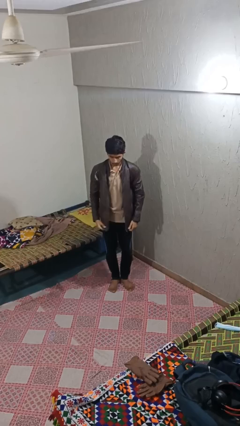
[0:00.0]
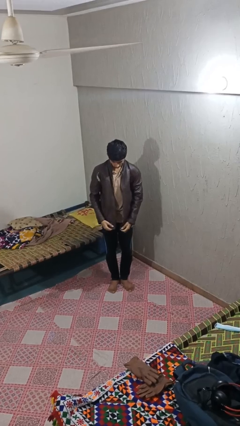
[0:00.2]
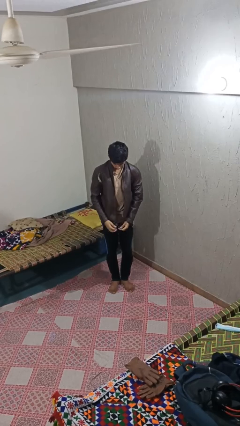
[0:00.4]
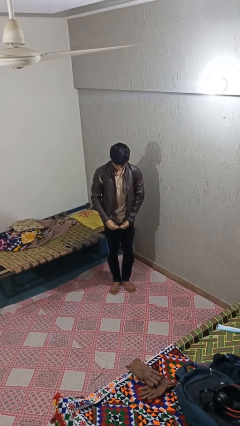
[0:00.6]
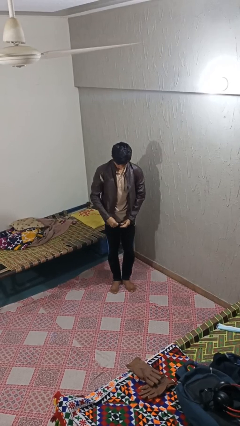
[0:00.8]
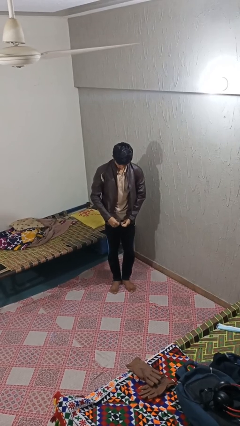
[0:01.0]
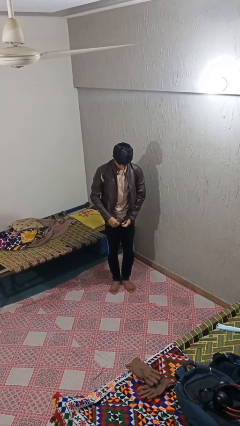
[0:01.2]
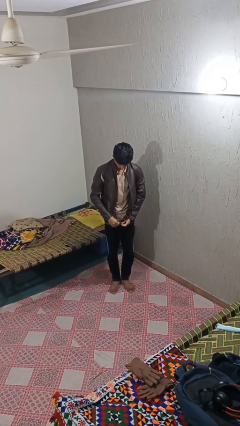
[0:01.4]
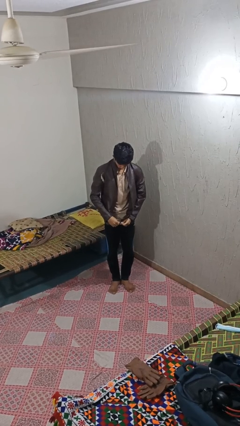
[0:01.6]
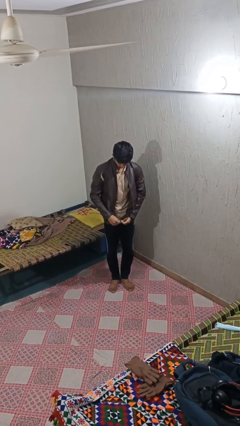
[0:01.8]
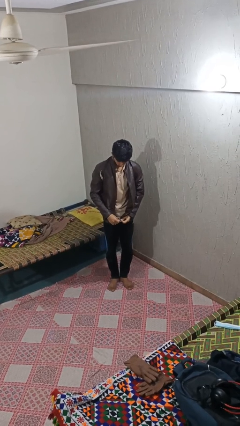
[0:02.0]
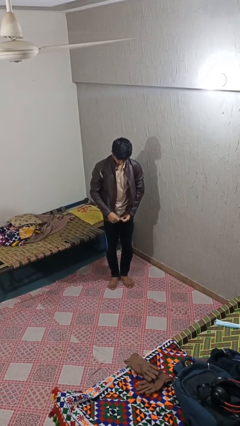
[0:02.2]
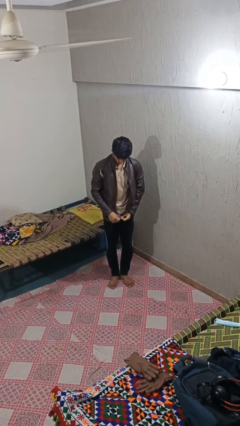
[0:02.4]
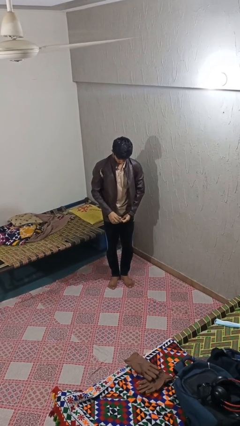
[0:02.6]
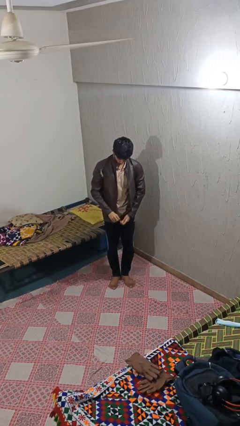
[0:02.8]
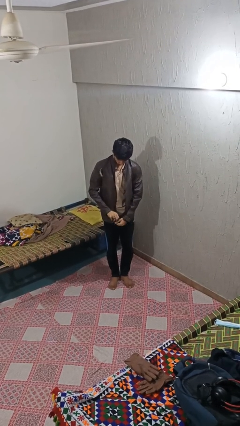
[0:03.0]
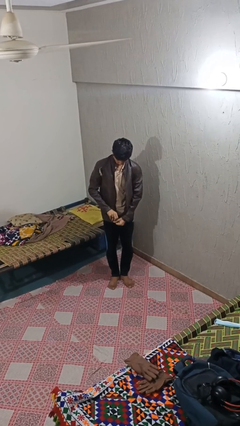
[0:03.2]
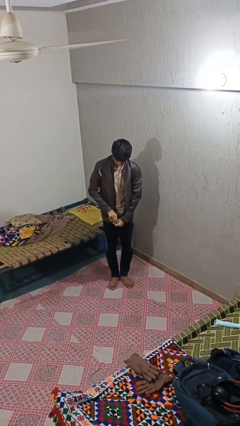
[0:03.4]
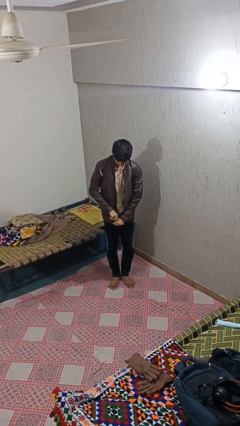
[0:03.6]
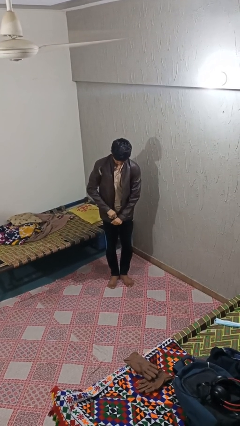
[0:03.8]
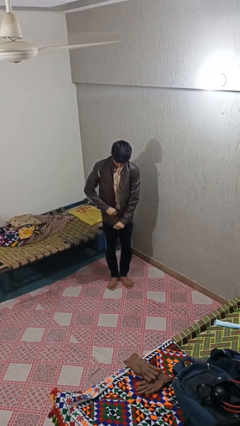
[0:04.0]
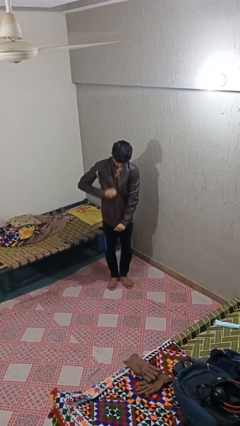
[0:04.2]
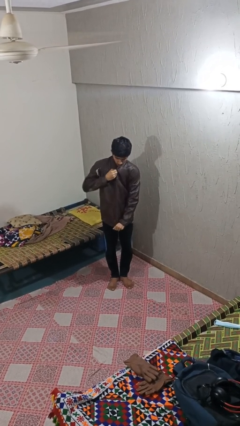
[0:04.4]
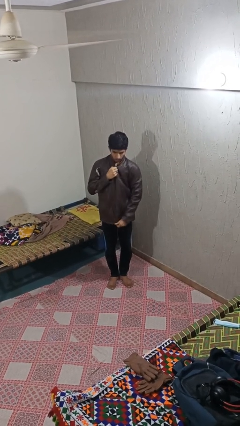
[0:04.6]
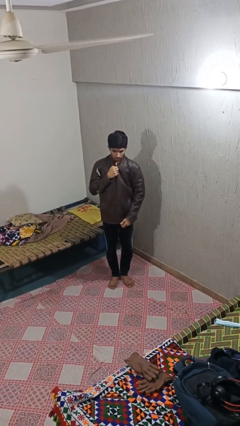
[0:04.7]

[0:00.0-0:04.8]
person zips up jacket

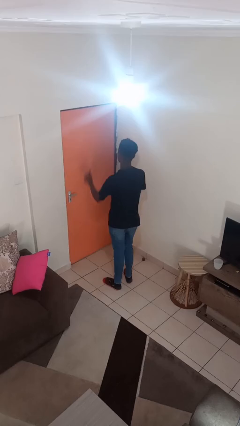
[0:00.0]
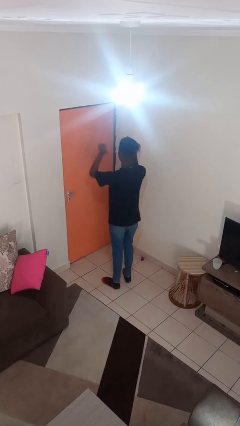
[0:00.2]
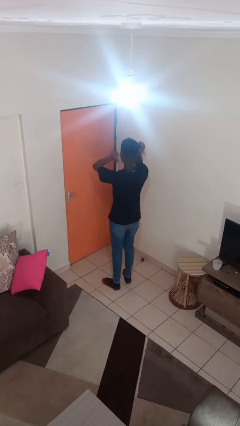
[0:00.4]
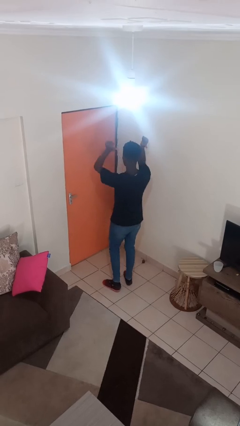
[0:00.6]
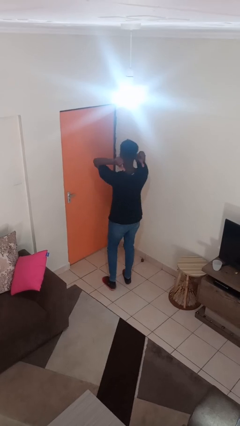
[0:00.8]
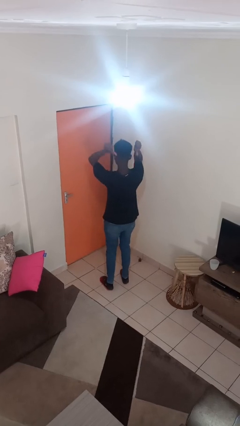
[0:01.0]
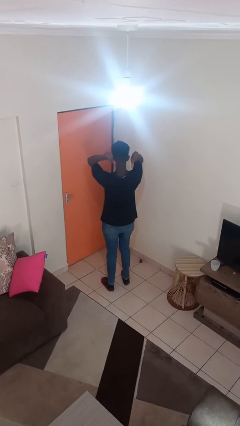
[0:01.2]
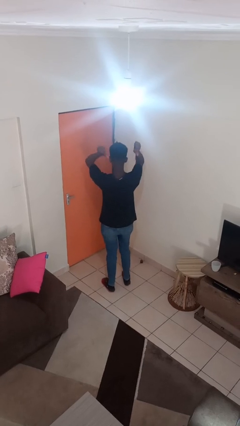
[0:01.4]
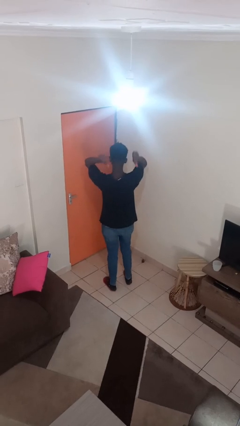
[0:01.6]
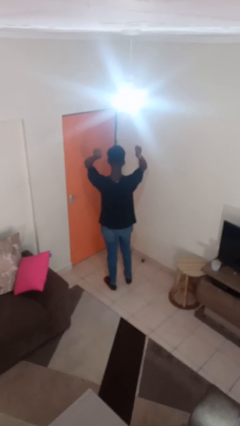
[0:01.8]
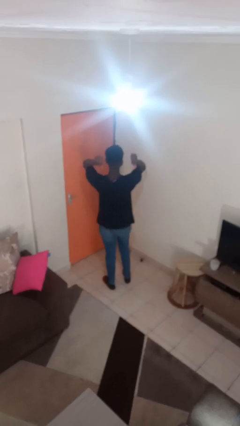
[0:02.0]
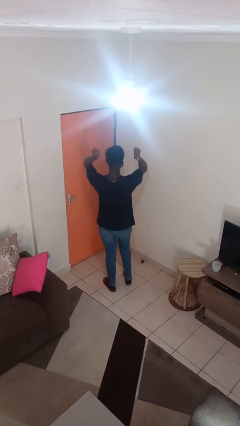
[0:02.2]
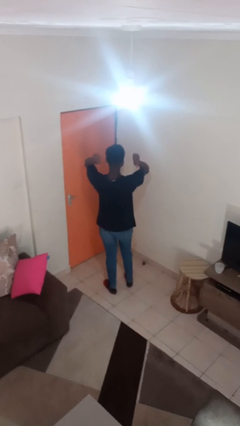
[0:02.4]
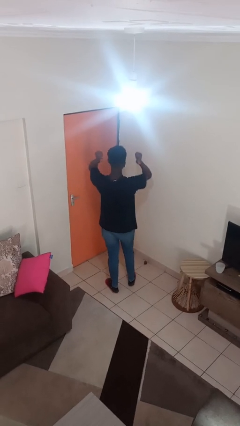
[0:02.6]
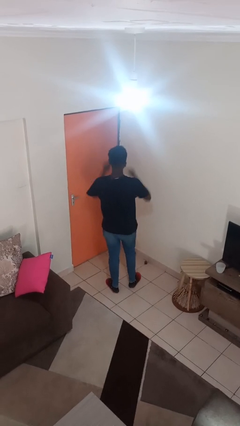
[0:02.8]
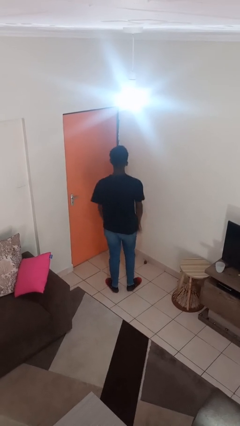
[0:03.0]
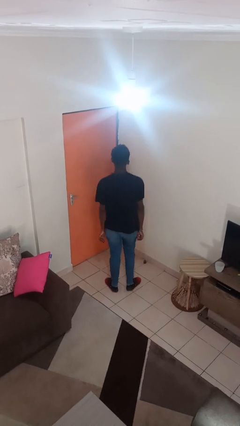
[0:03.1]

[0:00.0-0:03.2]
person gestures behind me

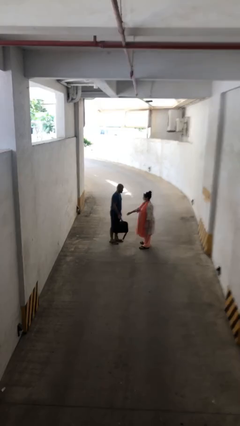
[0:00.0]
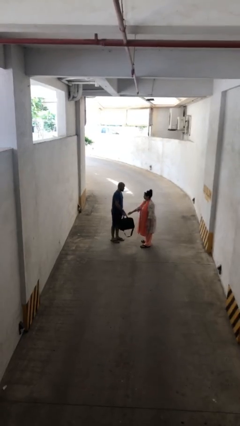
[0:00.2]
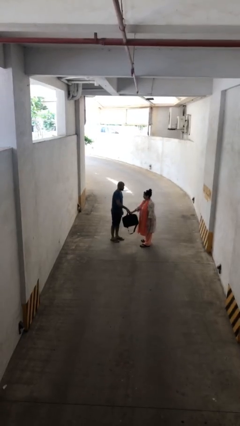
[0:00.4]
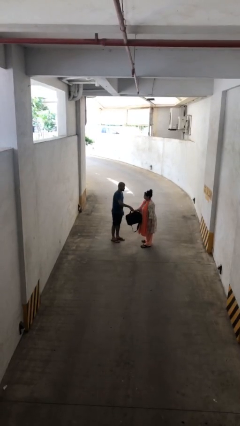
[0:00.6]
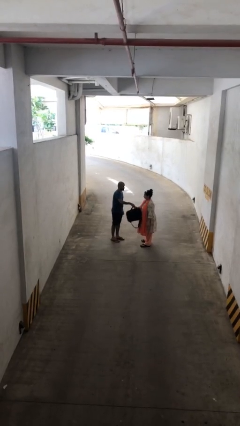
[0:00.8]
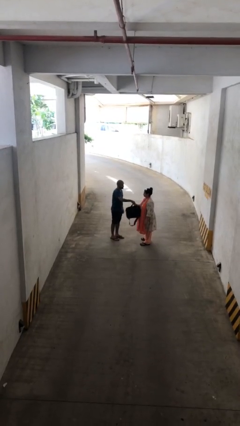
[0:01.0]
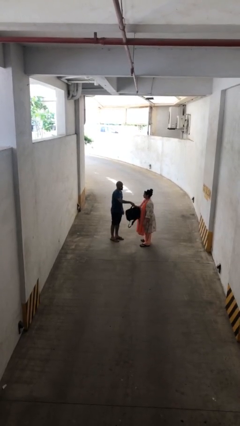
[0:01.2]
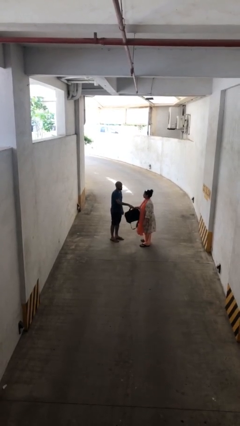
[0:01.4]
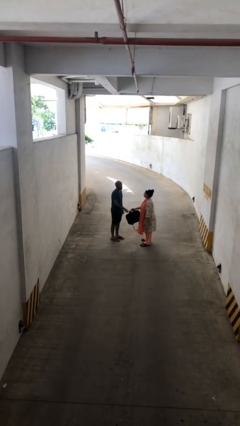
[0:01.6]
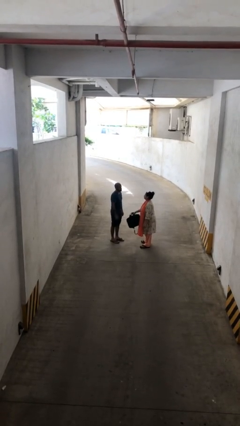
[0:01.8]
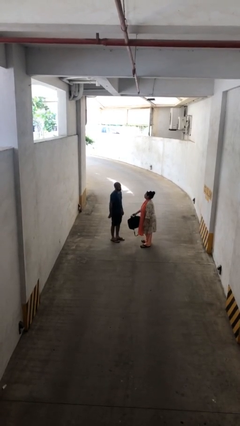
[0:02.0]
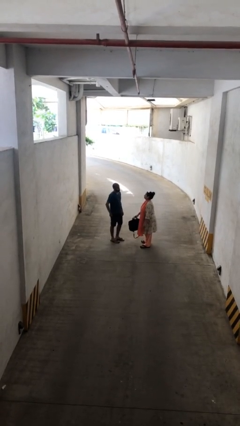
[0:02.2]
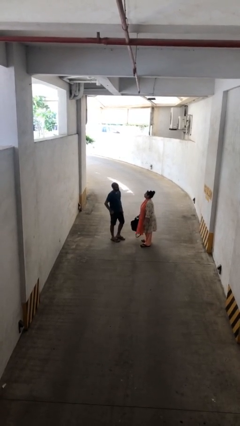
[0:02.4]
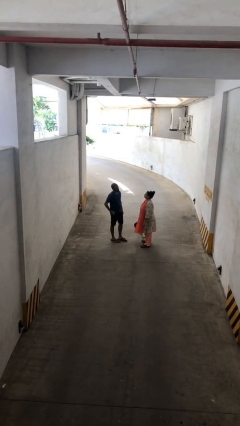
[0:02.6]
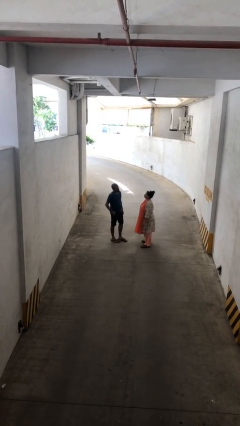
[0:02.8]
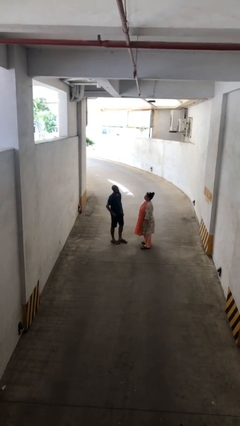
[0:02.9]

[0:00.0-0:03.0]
person transfers object to person

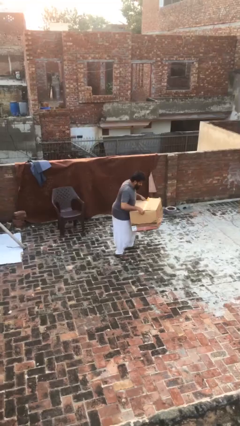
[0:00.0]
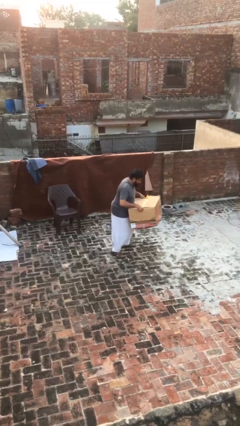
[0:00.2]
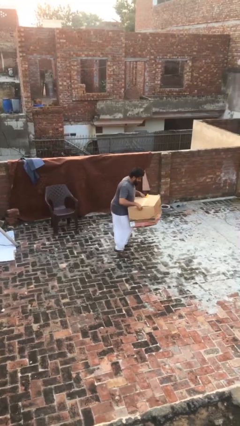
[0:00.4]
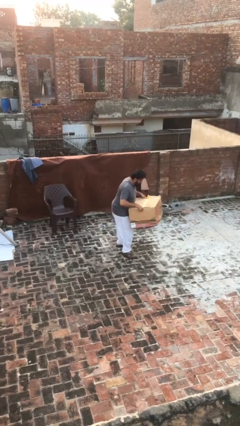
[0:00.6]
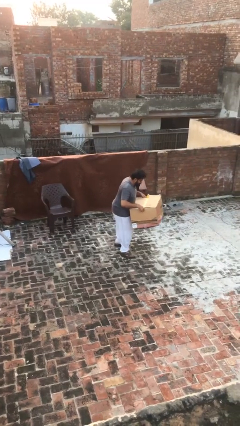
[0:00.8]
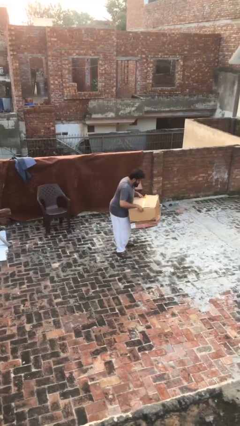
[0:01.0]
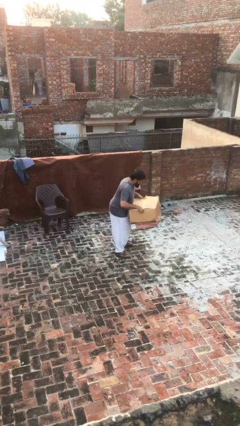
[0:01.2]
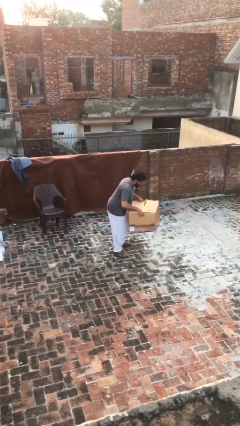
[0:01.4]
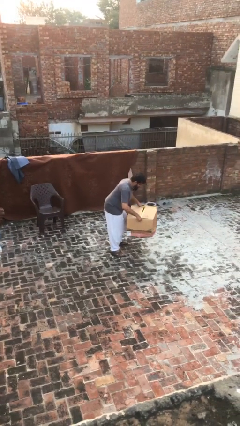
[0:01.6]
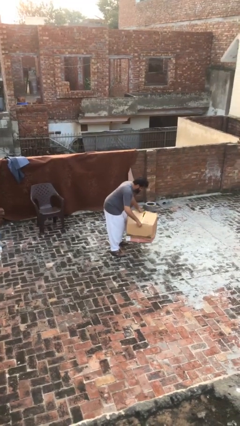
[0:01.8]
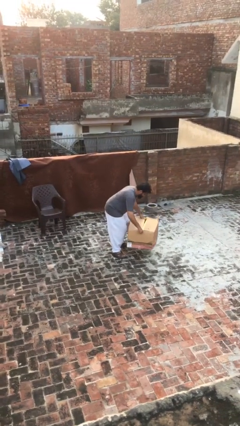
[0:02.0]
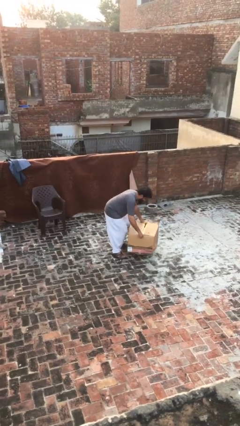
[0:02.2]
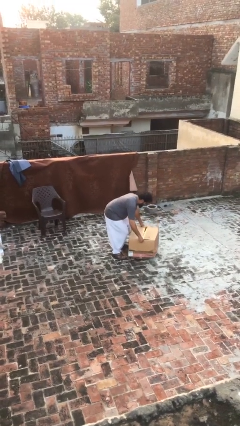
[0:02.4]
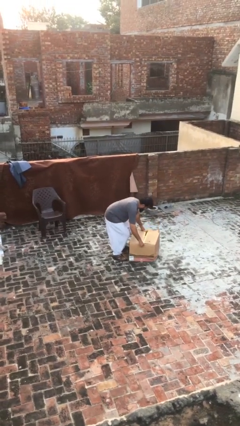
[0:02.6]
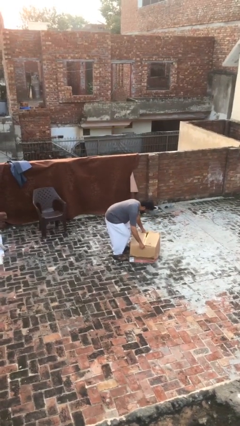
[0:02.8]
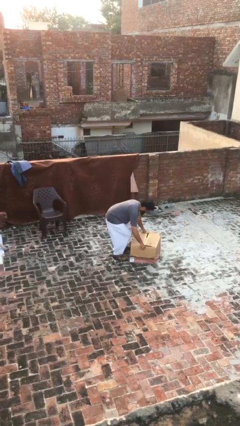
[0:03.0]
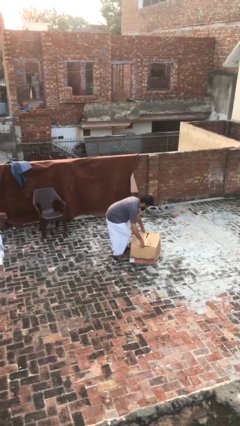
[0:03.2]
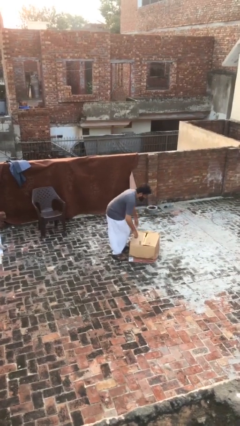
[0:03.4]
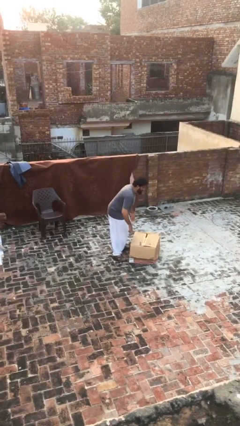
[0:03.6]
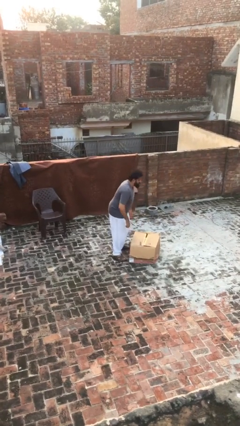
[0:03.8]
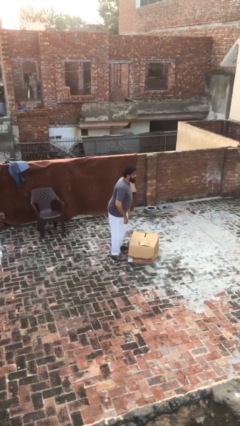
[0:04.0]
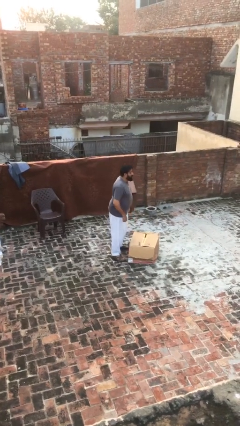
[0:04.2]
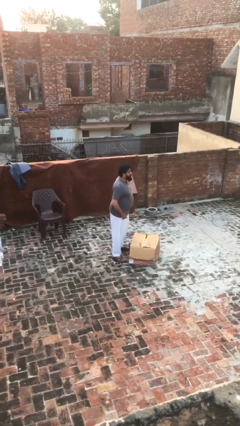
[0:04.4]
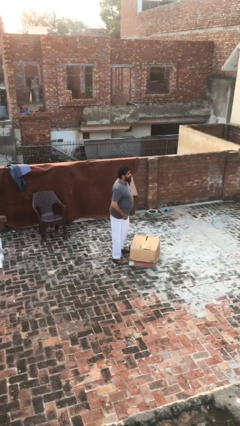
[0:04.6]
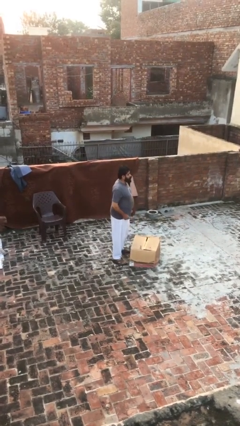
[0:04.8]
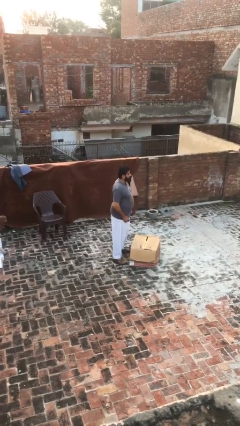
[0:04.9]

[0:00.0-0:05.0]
person puts down object on floor

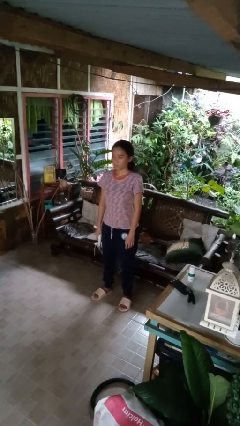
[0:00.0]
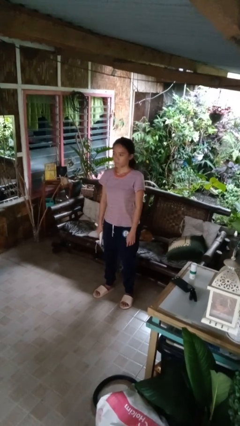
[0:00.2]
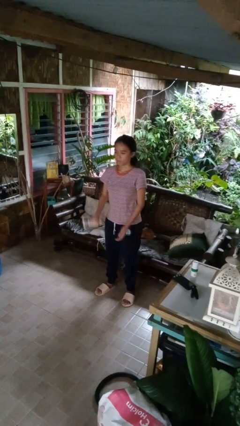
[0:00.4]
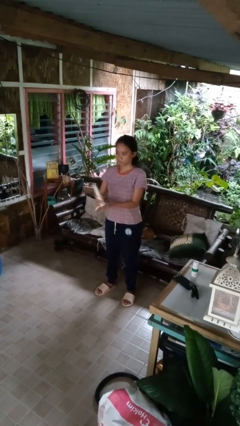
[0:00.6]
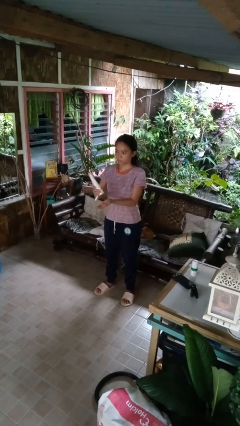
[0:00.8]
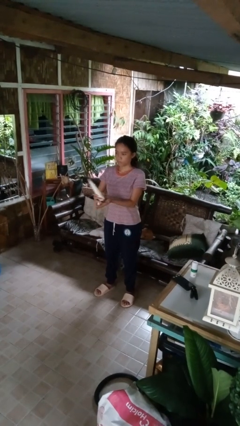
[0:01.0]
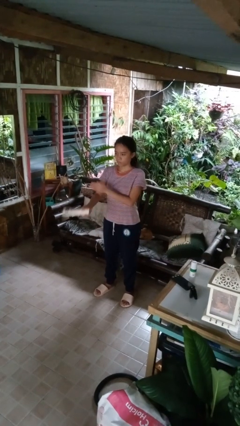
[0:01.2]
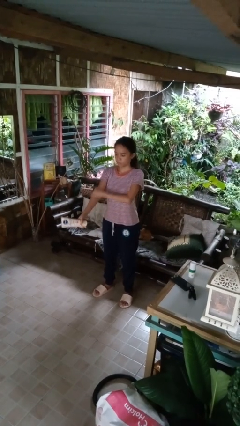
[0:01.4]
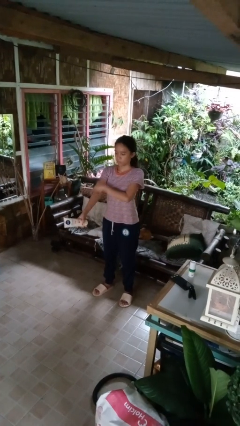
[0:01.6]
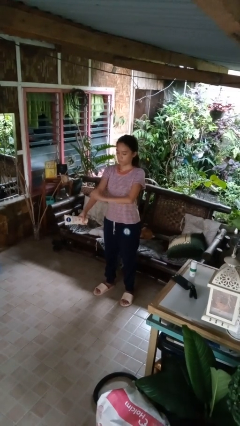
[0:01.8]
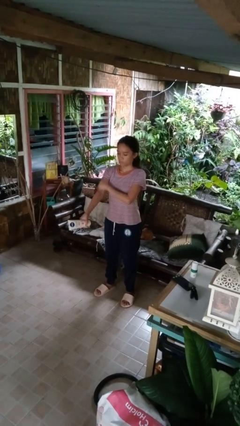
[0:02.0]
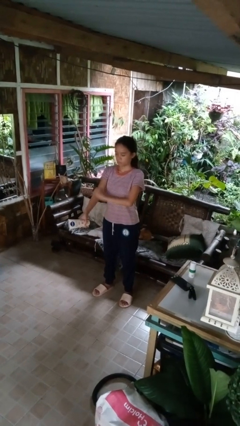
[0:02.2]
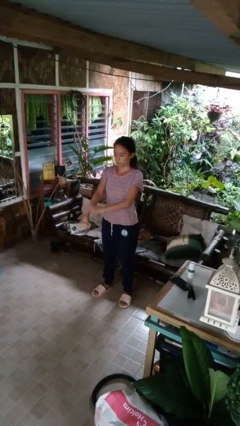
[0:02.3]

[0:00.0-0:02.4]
person applies sunscreen
